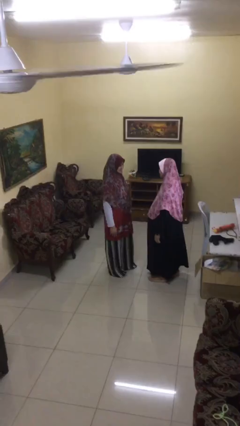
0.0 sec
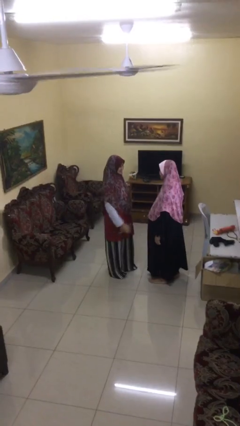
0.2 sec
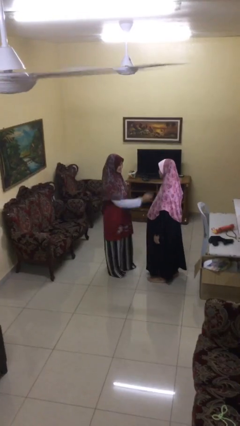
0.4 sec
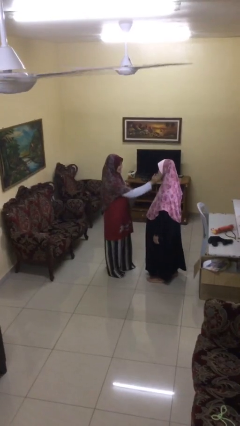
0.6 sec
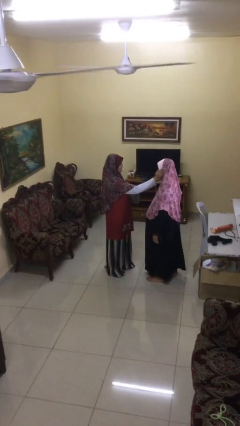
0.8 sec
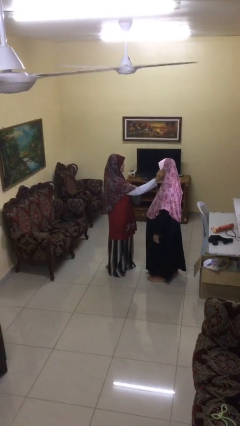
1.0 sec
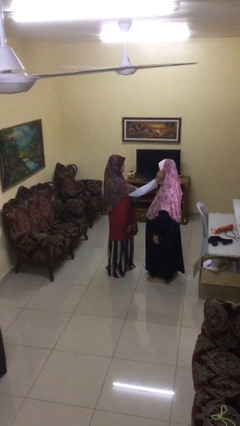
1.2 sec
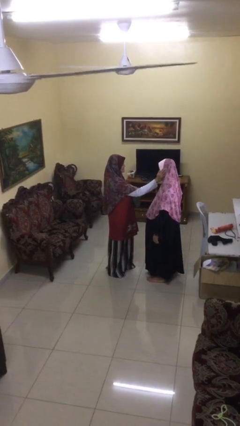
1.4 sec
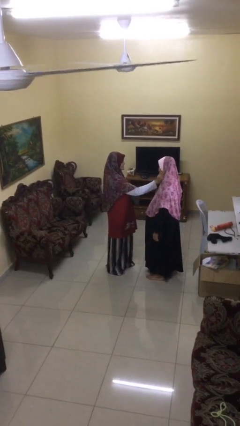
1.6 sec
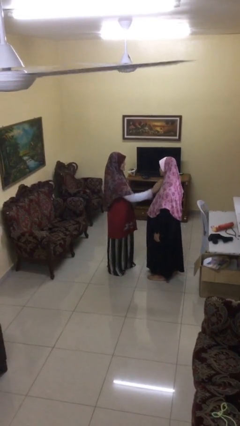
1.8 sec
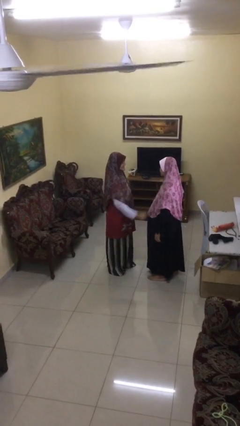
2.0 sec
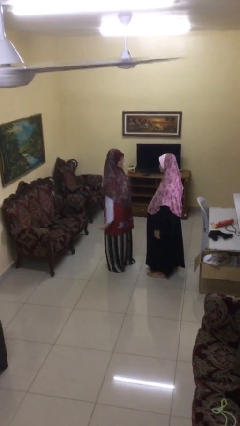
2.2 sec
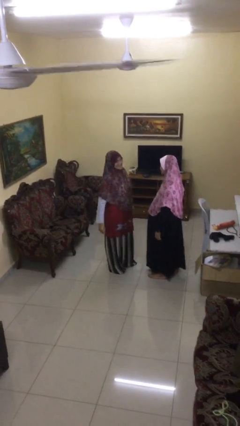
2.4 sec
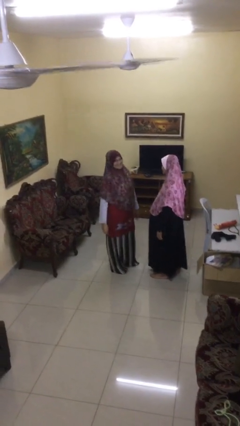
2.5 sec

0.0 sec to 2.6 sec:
person touches face of person

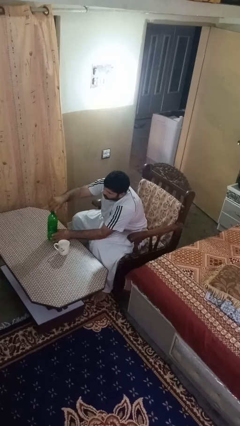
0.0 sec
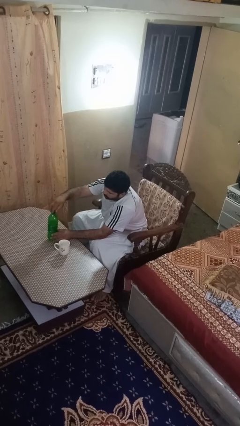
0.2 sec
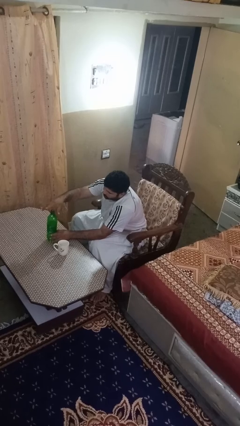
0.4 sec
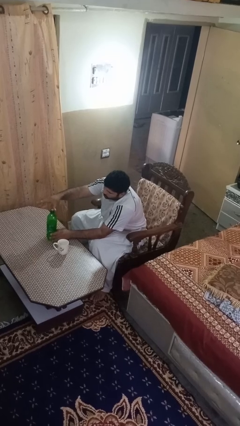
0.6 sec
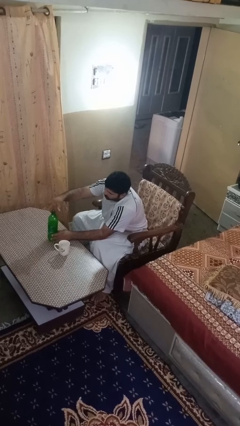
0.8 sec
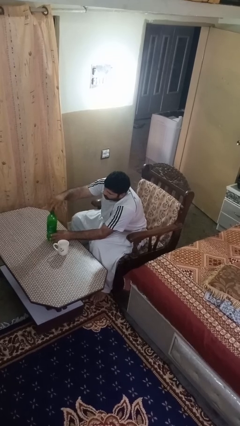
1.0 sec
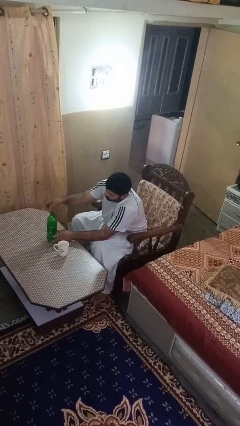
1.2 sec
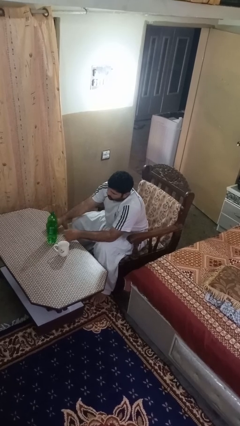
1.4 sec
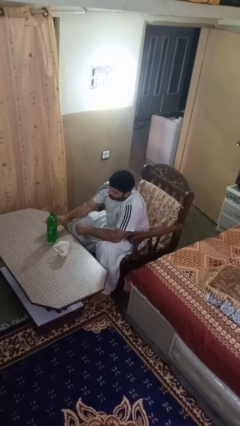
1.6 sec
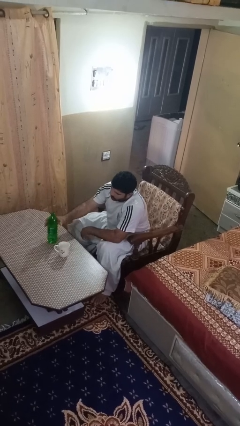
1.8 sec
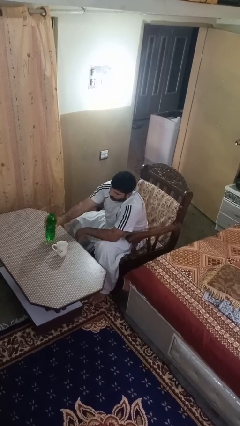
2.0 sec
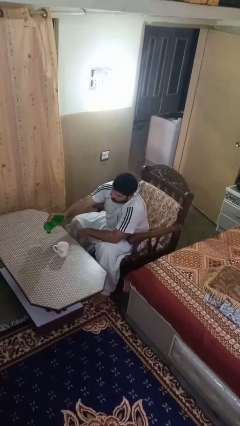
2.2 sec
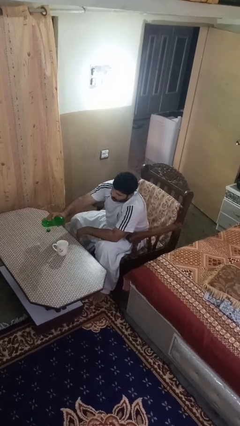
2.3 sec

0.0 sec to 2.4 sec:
person unscrews lid from bottle

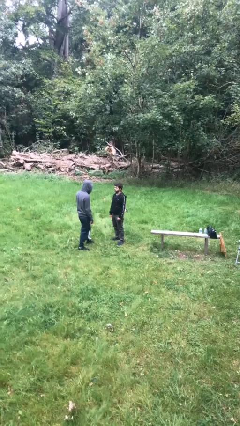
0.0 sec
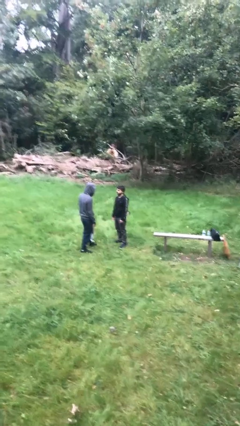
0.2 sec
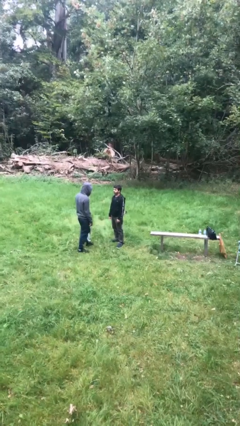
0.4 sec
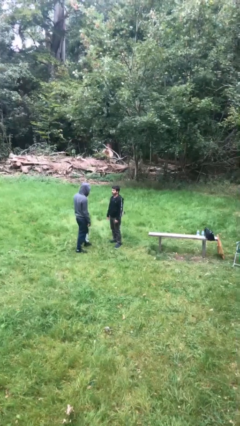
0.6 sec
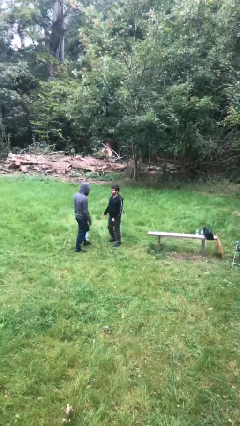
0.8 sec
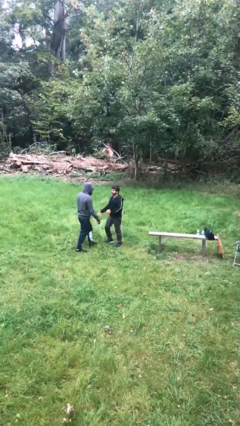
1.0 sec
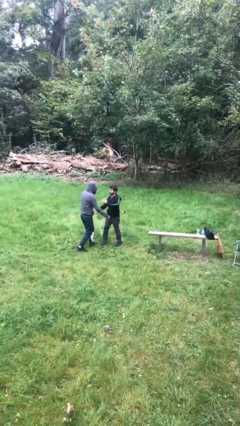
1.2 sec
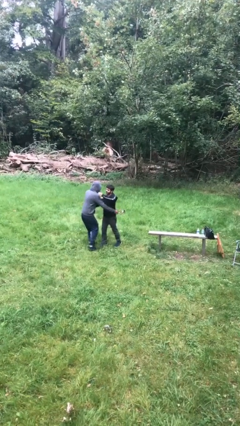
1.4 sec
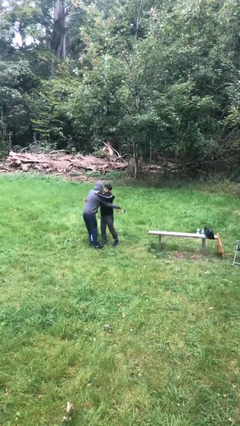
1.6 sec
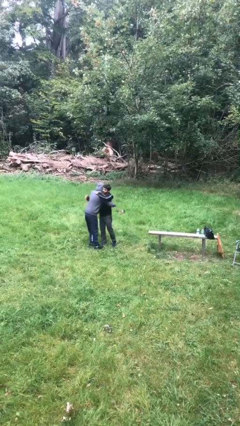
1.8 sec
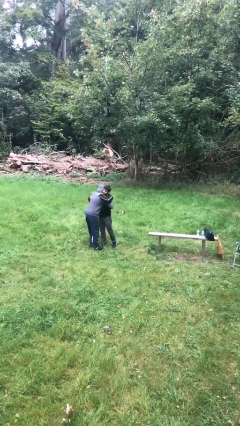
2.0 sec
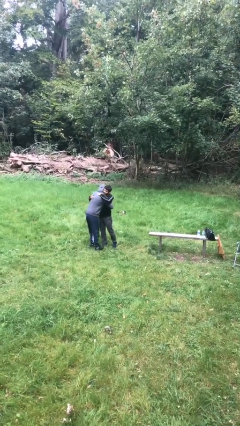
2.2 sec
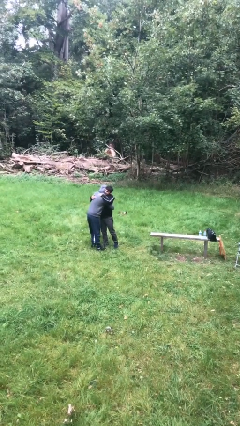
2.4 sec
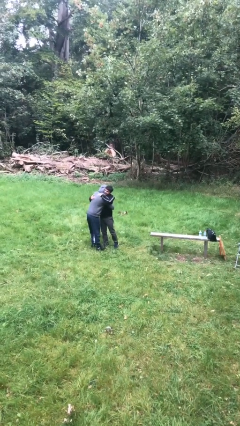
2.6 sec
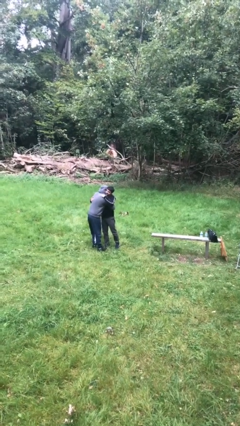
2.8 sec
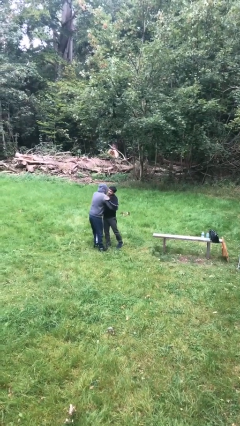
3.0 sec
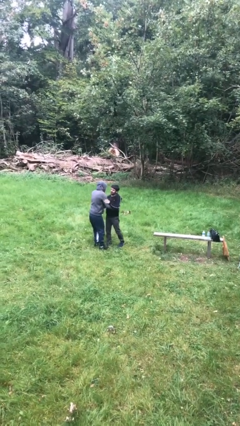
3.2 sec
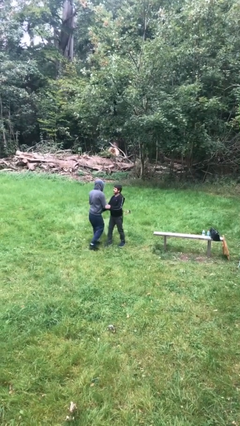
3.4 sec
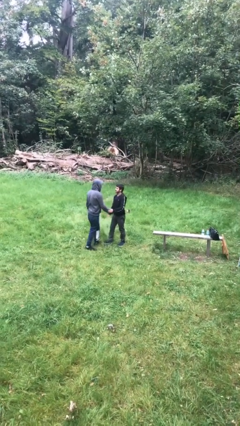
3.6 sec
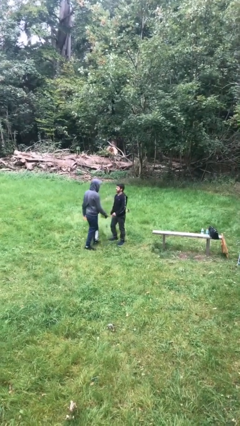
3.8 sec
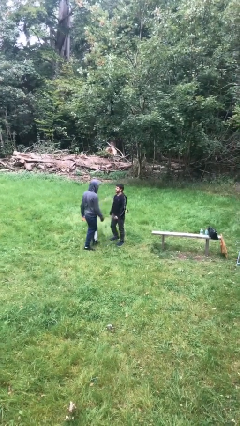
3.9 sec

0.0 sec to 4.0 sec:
person embraces person

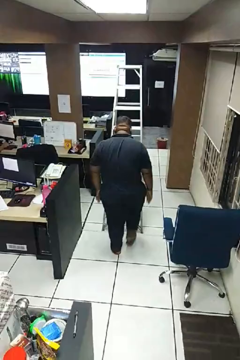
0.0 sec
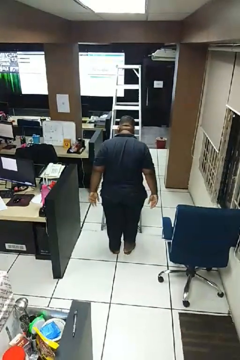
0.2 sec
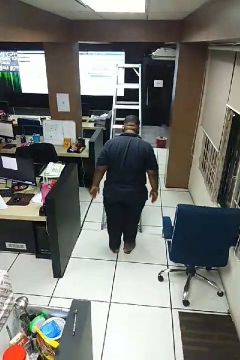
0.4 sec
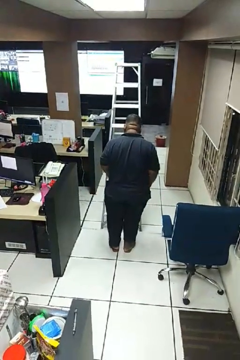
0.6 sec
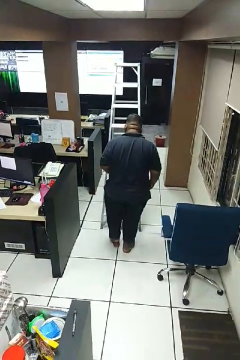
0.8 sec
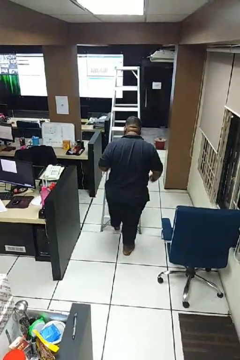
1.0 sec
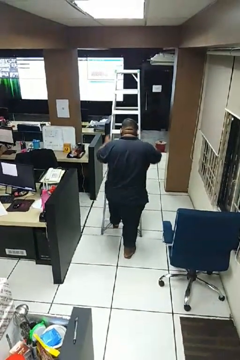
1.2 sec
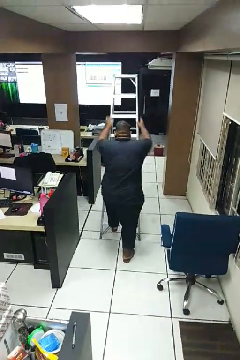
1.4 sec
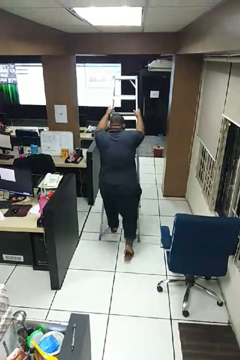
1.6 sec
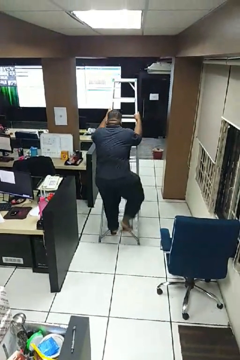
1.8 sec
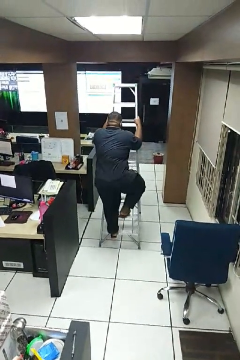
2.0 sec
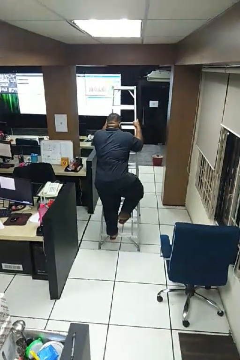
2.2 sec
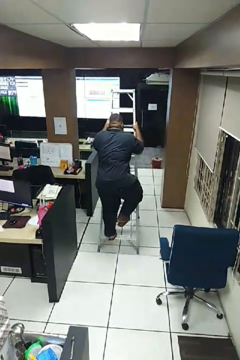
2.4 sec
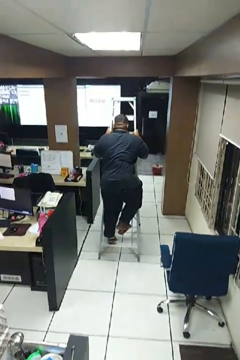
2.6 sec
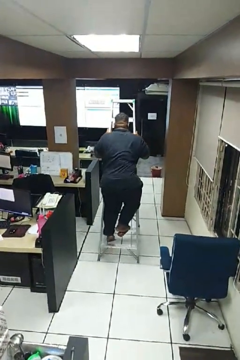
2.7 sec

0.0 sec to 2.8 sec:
person climbs up ladder

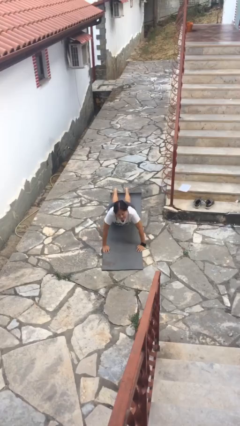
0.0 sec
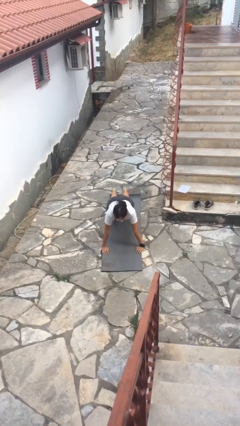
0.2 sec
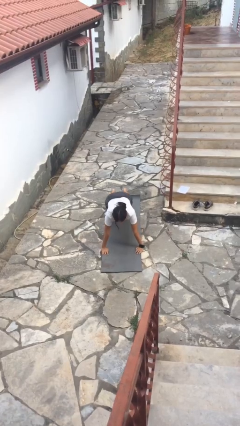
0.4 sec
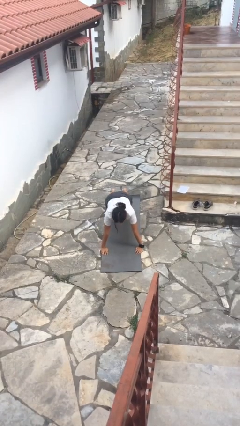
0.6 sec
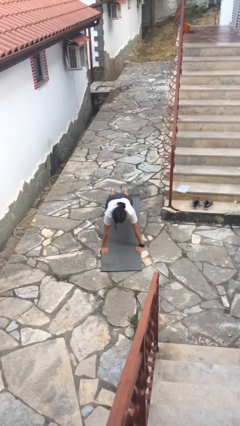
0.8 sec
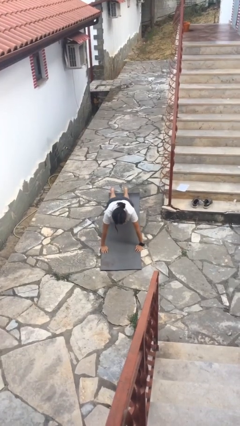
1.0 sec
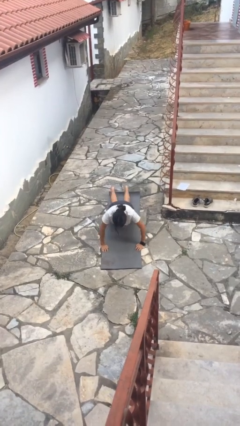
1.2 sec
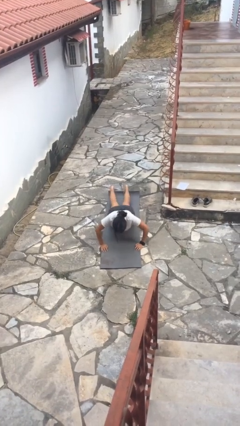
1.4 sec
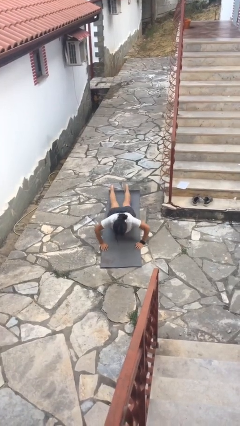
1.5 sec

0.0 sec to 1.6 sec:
person exercises with pushup

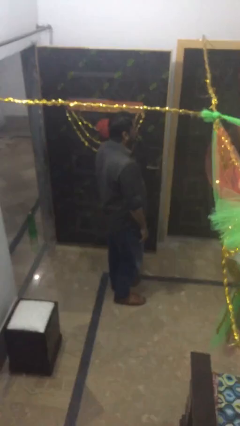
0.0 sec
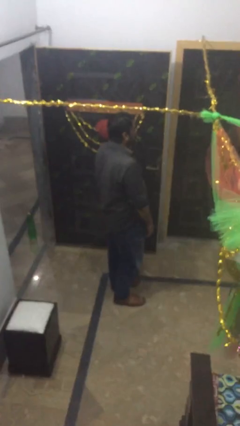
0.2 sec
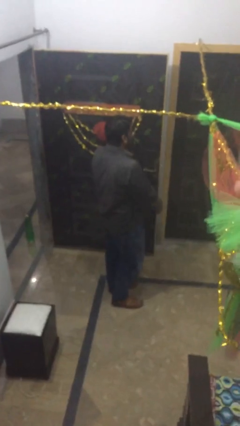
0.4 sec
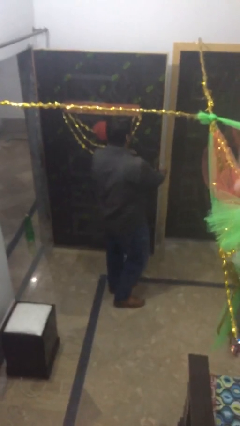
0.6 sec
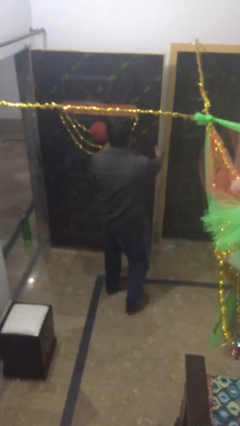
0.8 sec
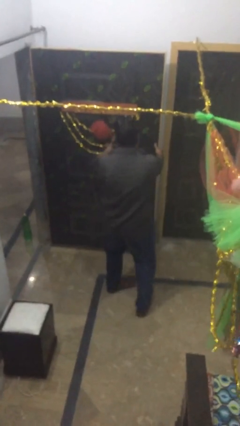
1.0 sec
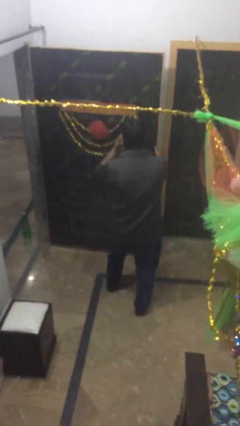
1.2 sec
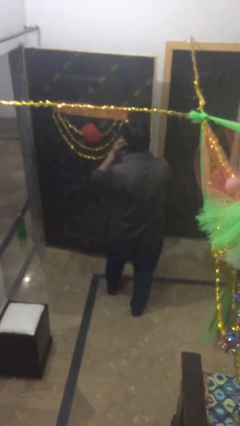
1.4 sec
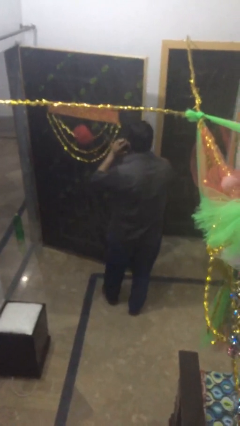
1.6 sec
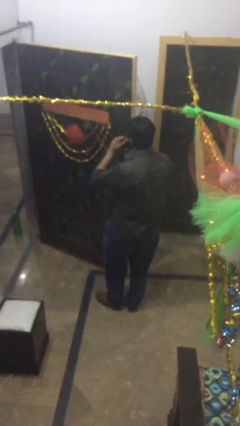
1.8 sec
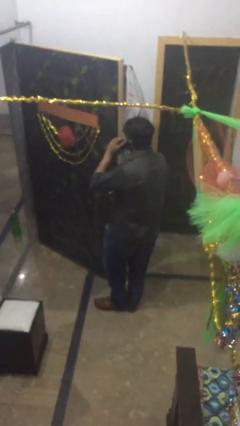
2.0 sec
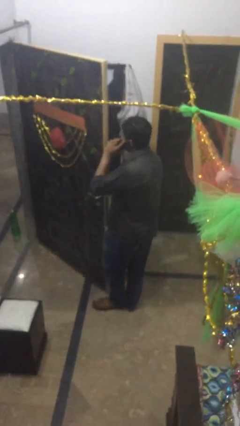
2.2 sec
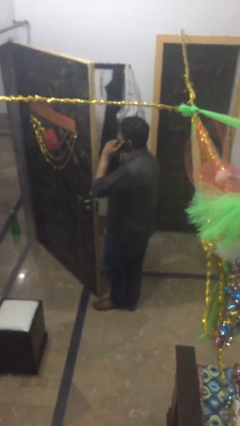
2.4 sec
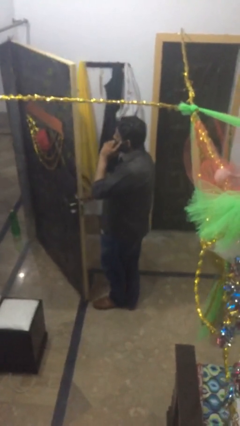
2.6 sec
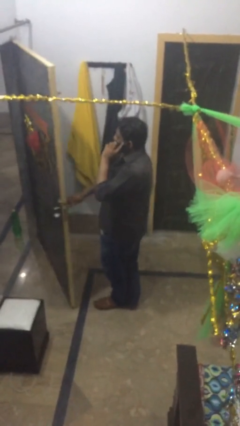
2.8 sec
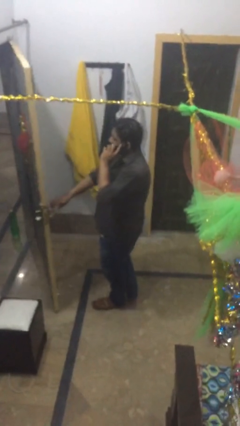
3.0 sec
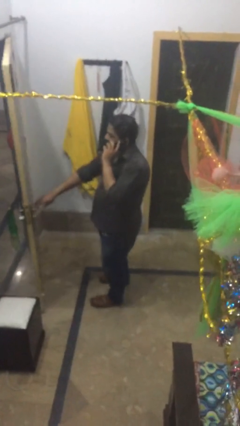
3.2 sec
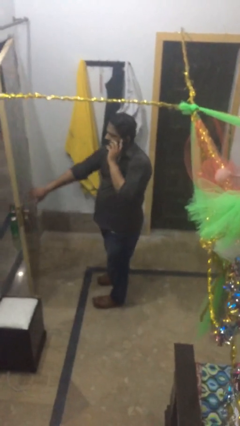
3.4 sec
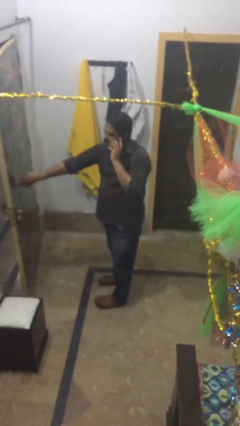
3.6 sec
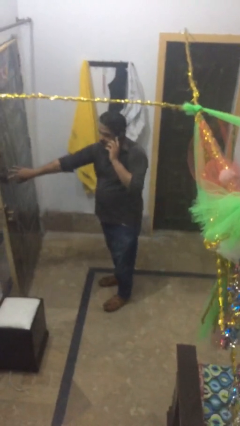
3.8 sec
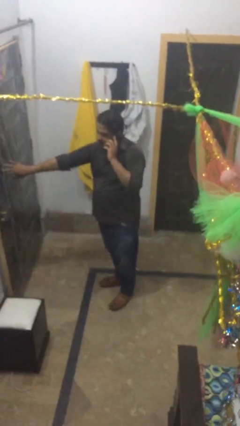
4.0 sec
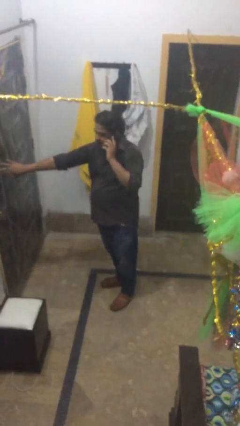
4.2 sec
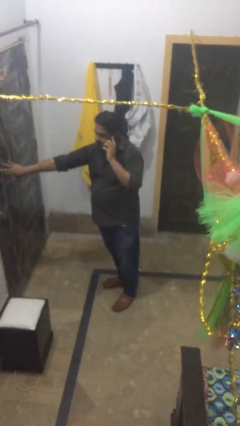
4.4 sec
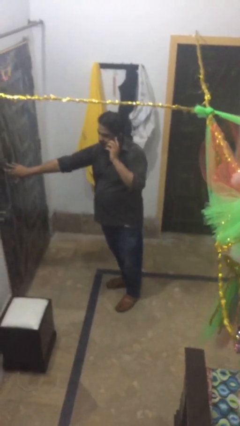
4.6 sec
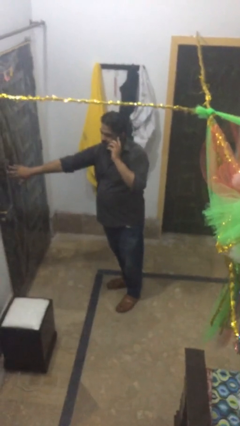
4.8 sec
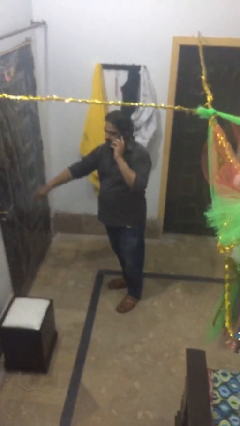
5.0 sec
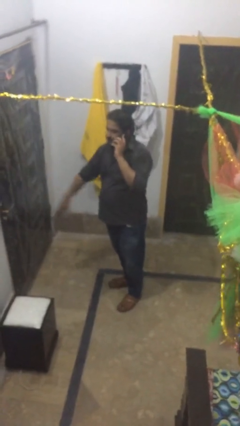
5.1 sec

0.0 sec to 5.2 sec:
person closes facility door
